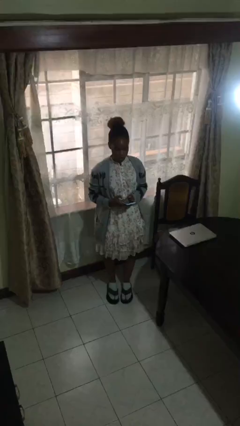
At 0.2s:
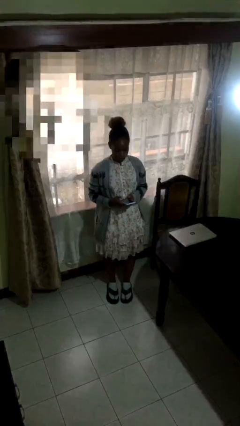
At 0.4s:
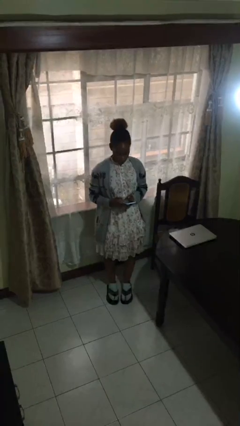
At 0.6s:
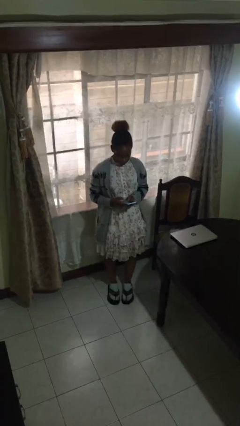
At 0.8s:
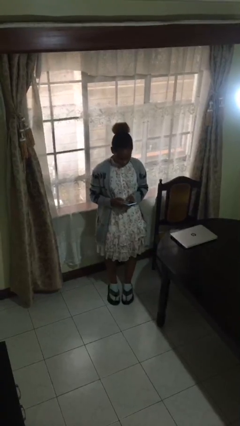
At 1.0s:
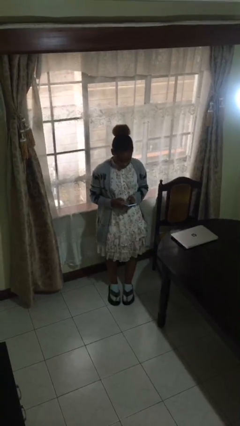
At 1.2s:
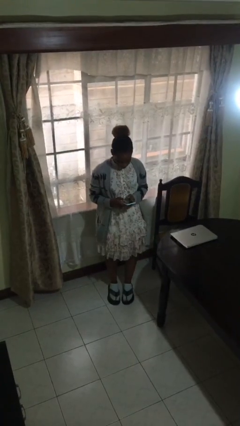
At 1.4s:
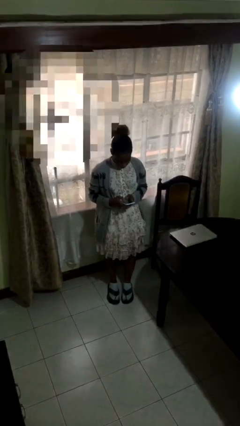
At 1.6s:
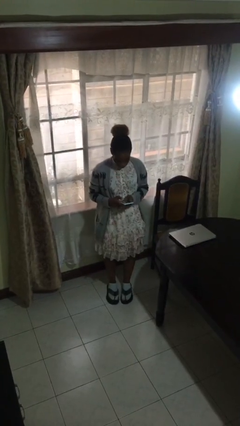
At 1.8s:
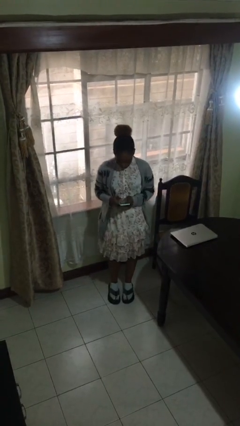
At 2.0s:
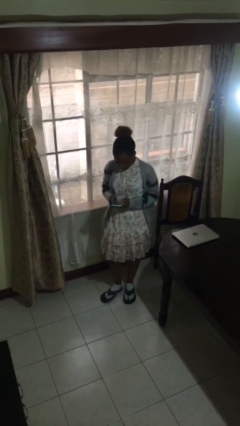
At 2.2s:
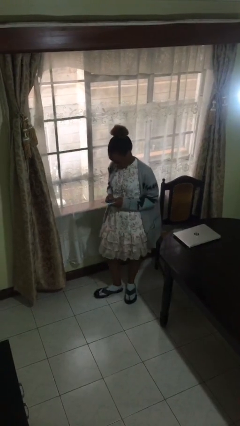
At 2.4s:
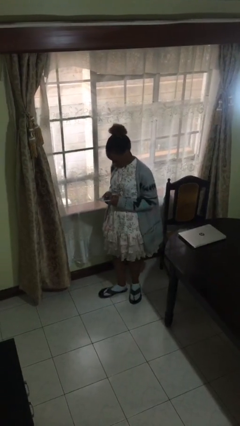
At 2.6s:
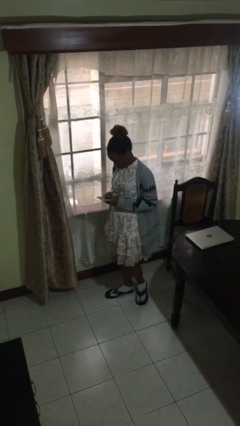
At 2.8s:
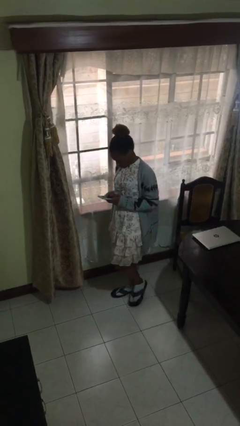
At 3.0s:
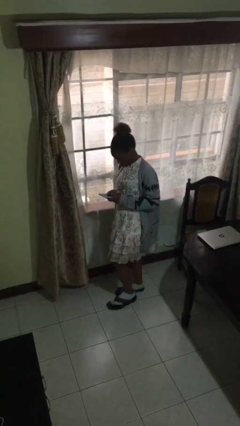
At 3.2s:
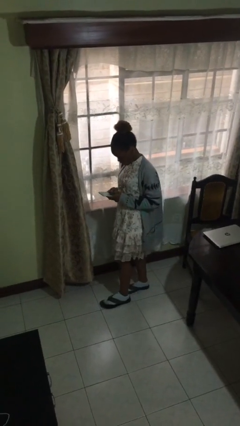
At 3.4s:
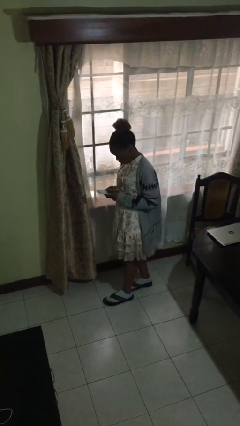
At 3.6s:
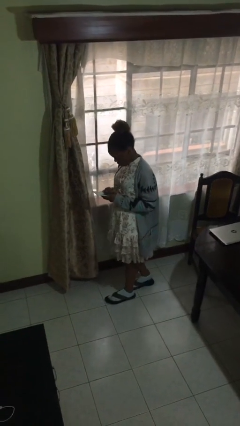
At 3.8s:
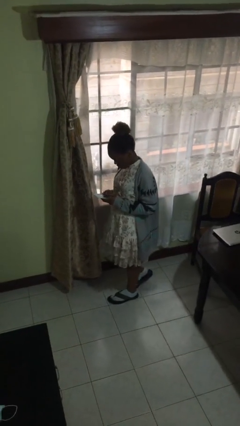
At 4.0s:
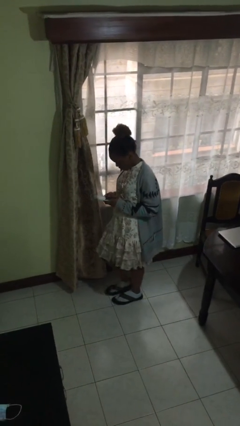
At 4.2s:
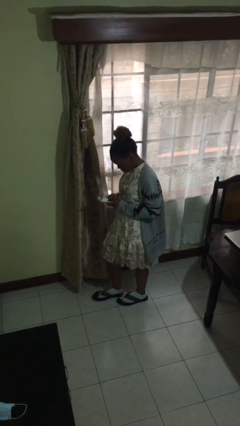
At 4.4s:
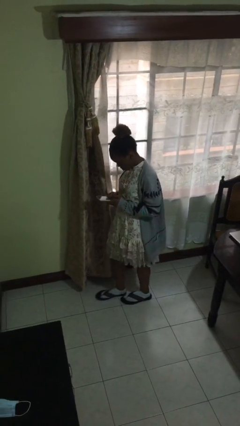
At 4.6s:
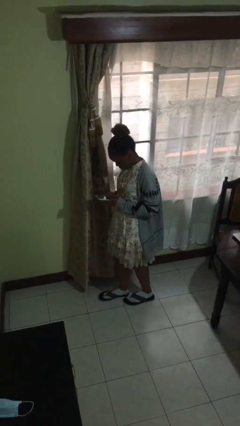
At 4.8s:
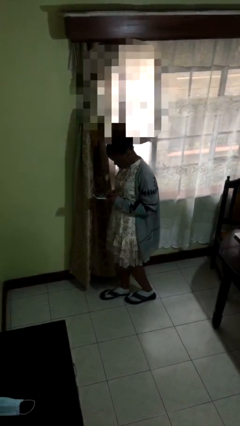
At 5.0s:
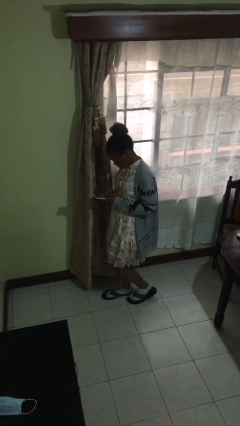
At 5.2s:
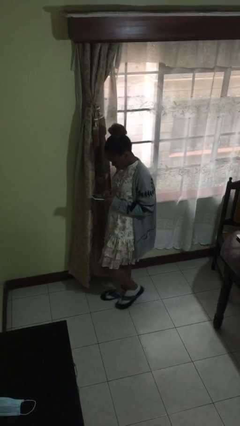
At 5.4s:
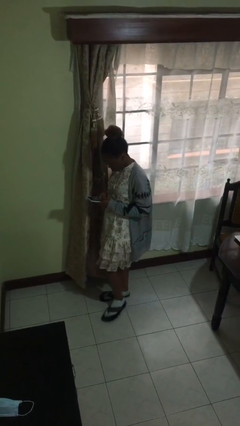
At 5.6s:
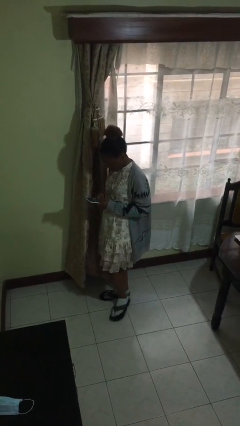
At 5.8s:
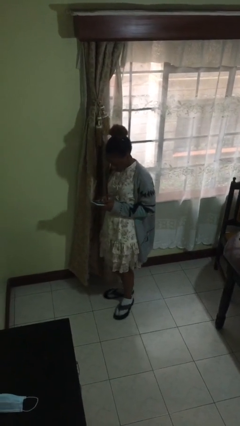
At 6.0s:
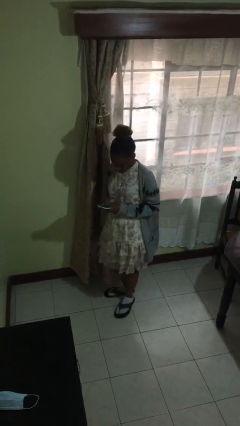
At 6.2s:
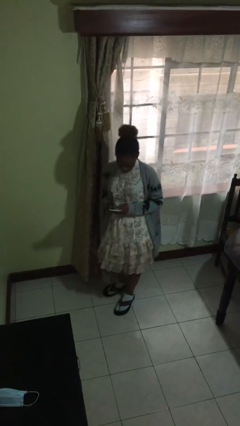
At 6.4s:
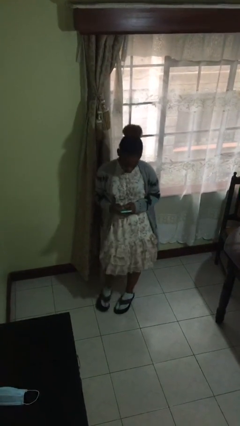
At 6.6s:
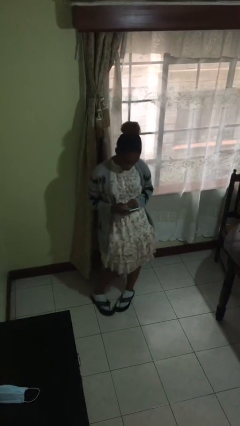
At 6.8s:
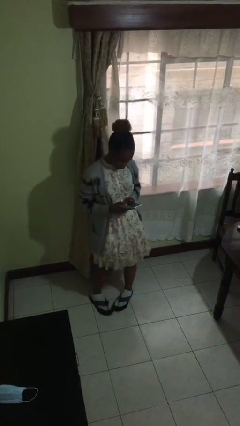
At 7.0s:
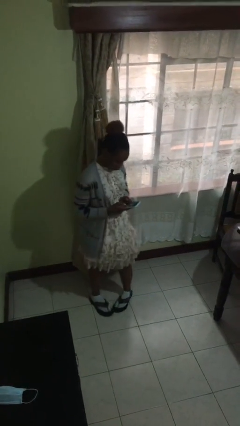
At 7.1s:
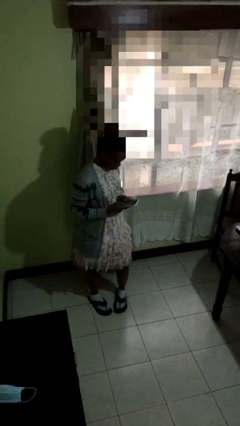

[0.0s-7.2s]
person texts on phone

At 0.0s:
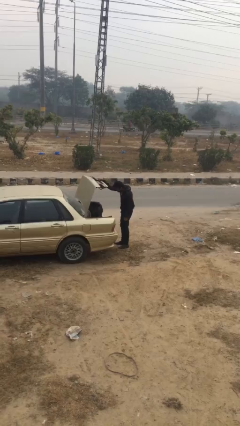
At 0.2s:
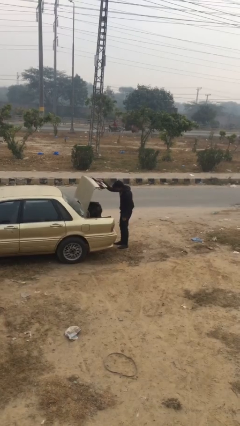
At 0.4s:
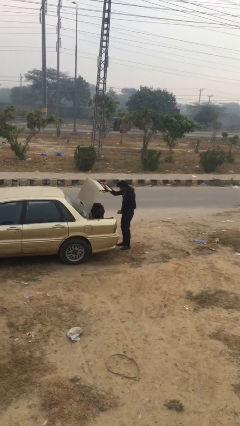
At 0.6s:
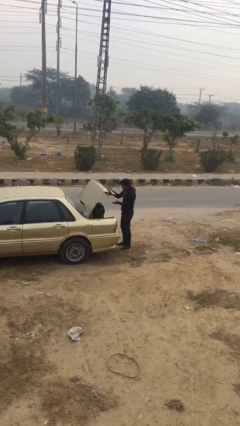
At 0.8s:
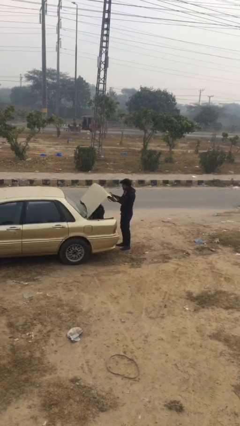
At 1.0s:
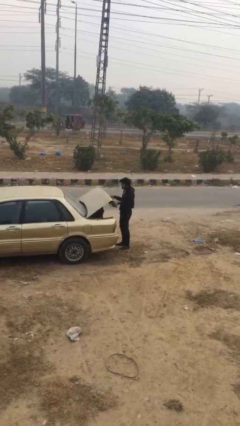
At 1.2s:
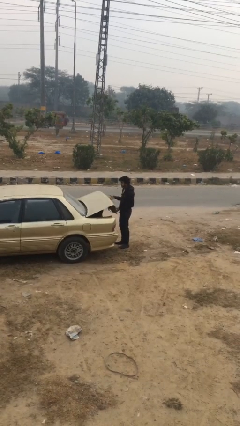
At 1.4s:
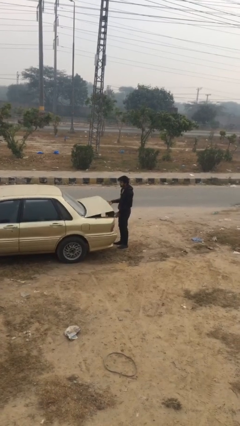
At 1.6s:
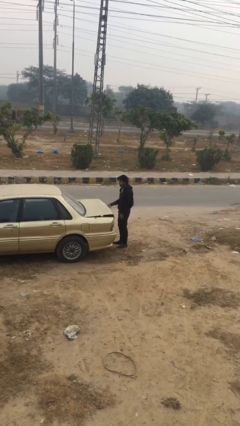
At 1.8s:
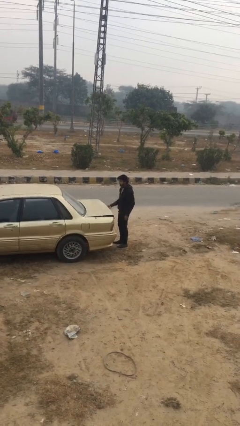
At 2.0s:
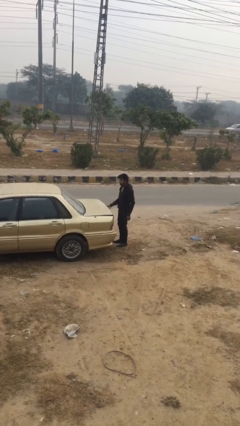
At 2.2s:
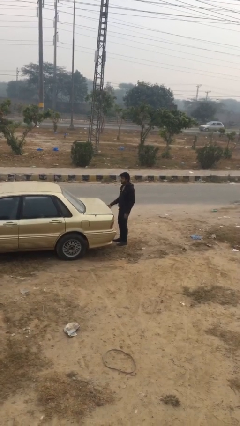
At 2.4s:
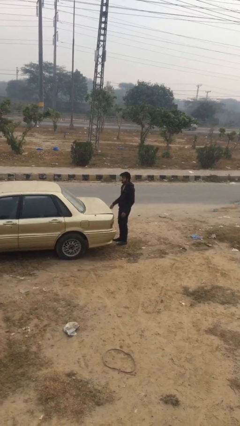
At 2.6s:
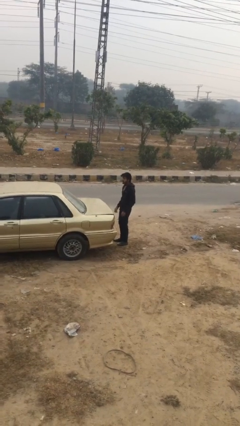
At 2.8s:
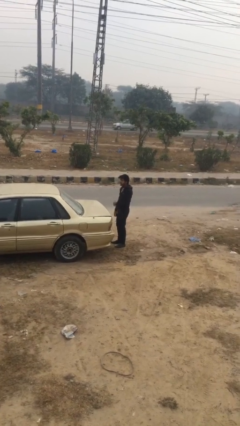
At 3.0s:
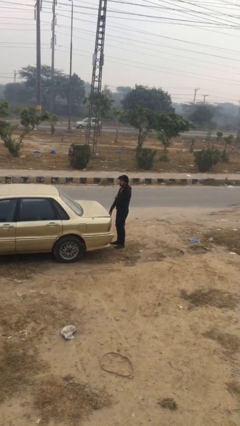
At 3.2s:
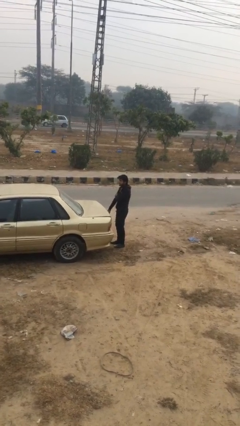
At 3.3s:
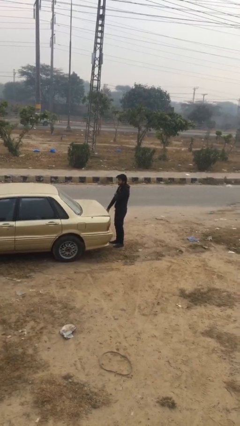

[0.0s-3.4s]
person closes car trunk

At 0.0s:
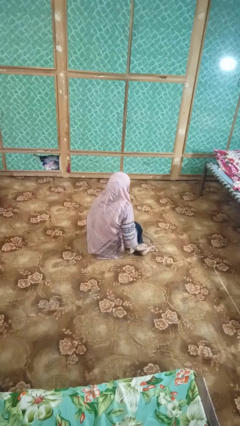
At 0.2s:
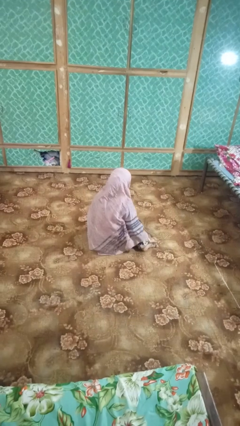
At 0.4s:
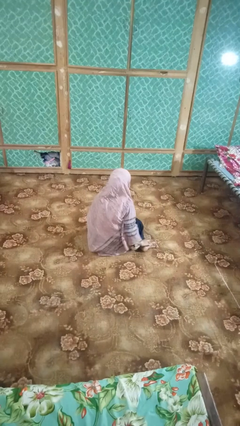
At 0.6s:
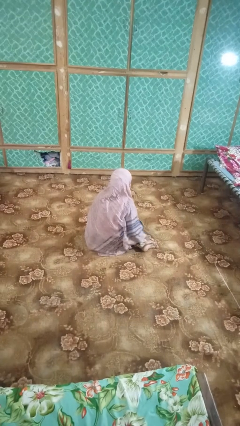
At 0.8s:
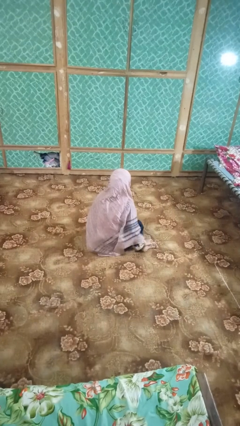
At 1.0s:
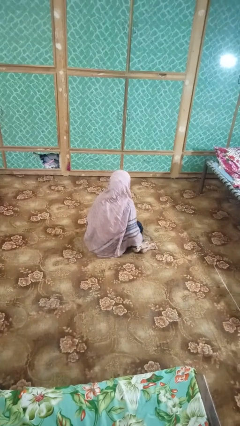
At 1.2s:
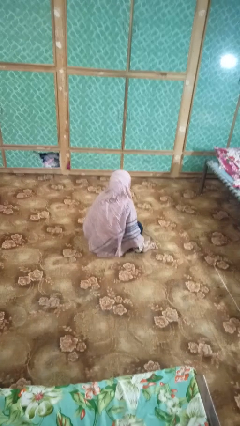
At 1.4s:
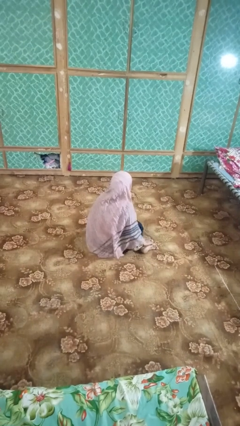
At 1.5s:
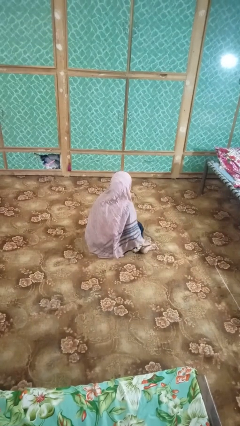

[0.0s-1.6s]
person rubs foot

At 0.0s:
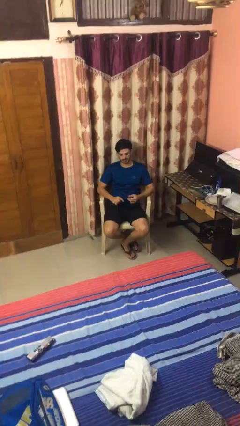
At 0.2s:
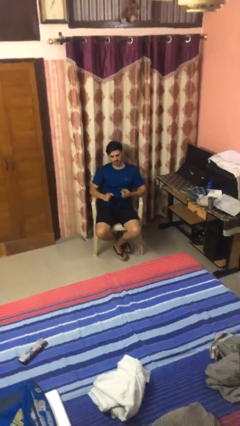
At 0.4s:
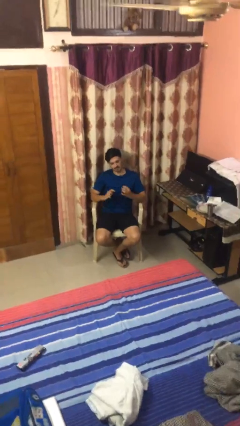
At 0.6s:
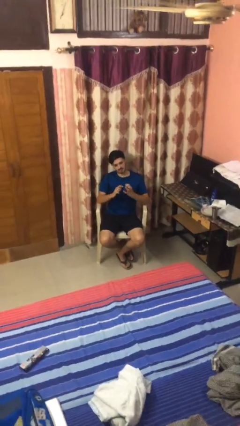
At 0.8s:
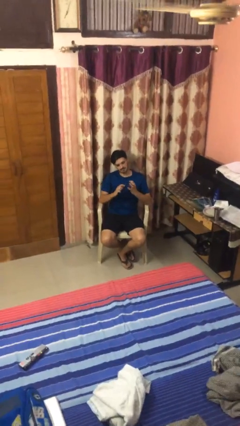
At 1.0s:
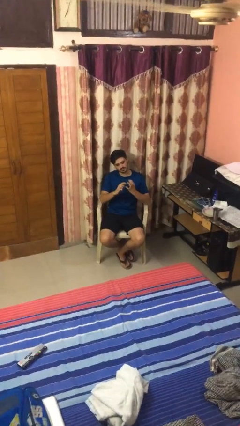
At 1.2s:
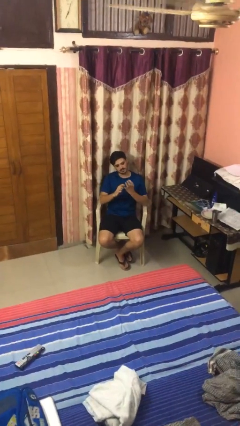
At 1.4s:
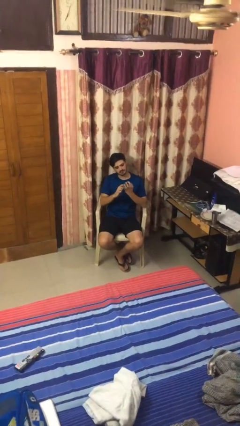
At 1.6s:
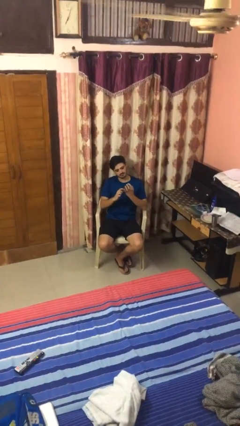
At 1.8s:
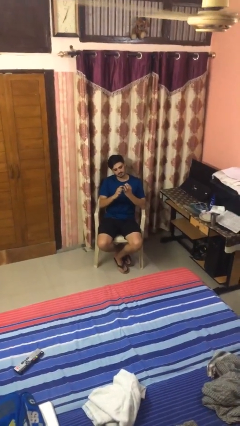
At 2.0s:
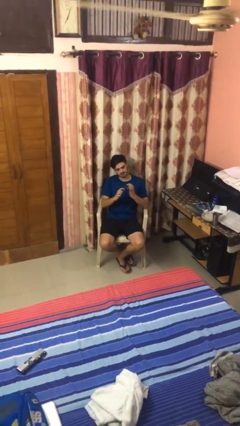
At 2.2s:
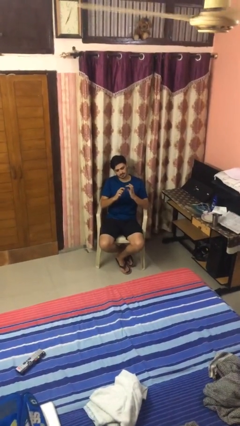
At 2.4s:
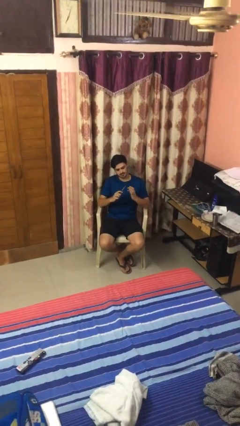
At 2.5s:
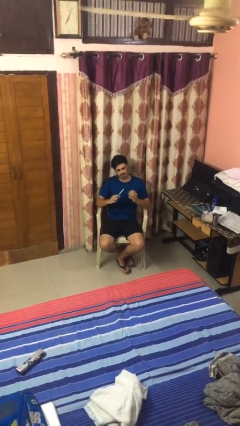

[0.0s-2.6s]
person files fingernails

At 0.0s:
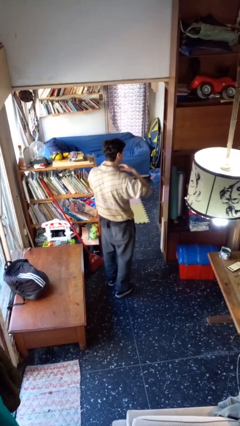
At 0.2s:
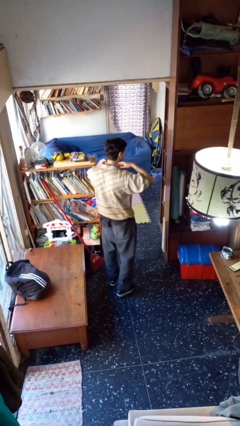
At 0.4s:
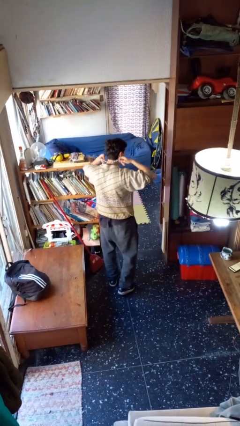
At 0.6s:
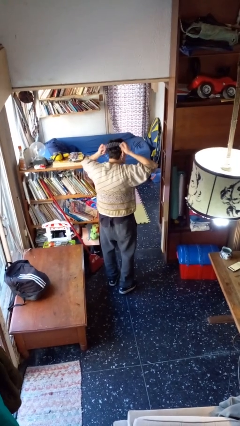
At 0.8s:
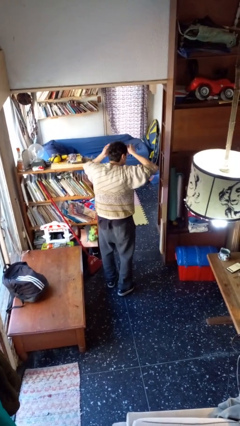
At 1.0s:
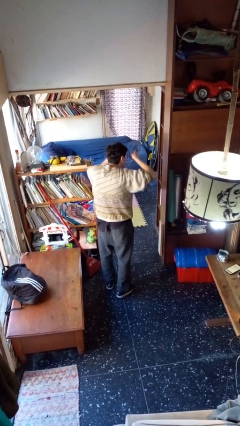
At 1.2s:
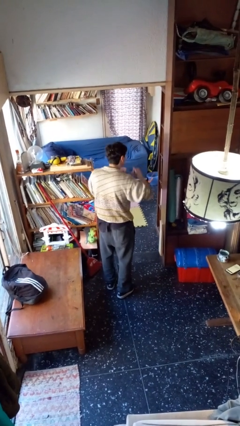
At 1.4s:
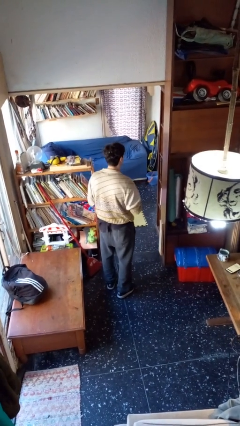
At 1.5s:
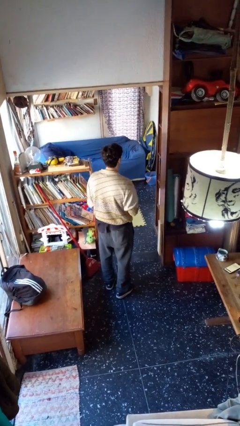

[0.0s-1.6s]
person takes off necklace

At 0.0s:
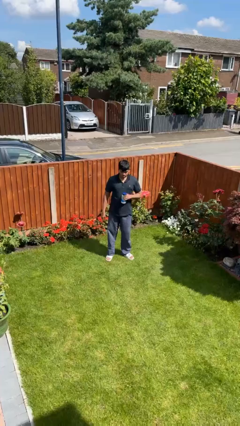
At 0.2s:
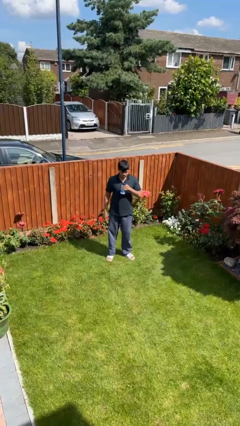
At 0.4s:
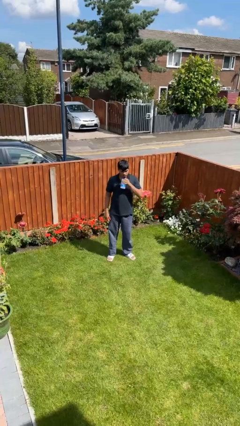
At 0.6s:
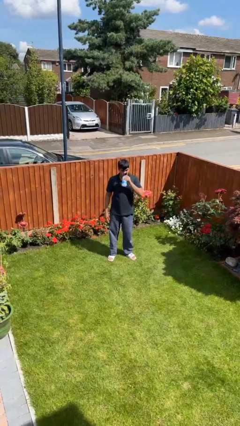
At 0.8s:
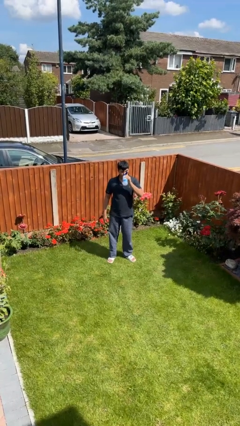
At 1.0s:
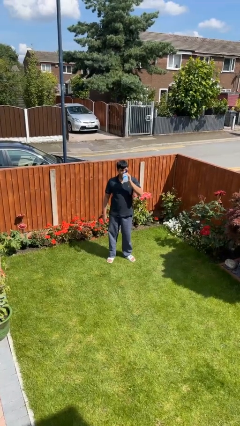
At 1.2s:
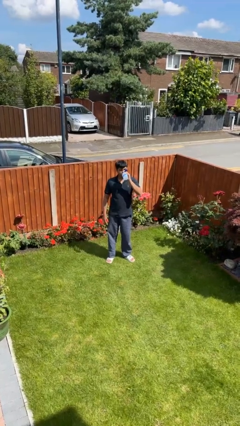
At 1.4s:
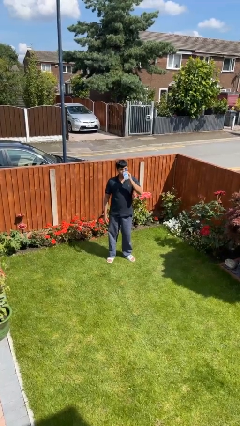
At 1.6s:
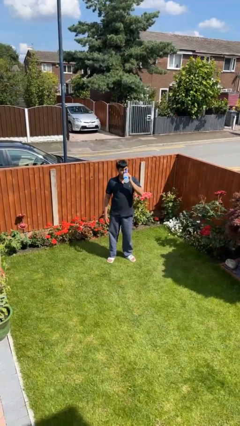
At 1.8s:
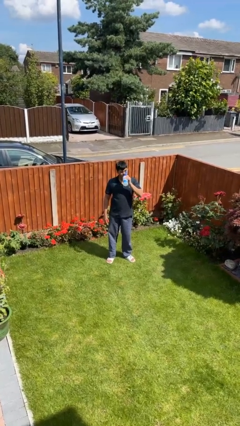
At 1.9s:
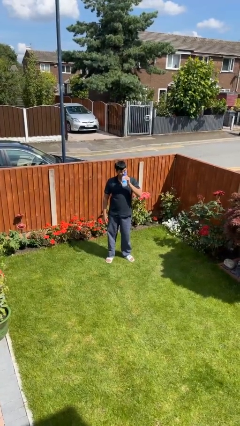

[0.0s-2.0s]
person drinks from bottle
